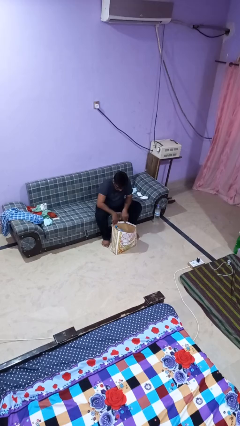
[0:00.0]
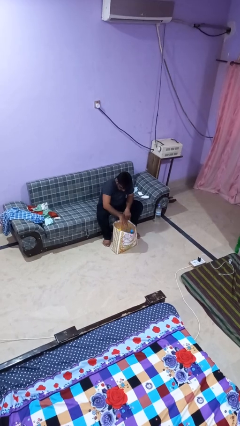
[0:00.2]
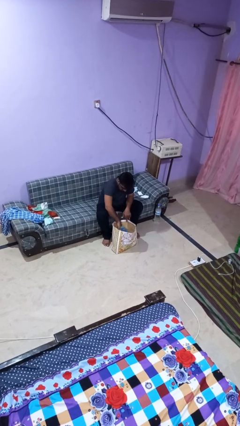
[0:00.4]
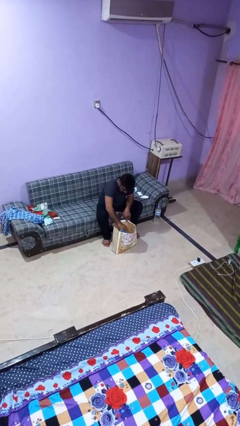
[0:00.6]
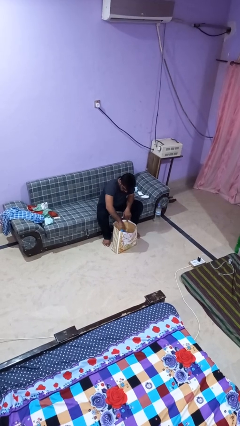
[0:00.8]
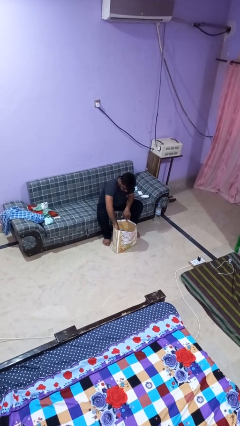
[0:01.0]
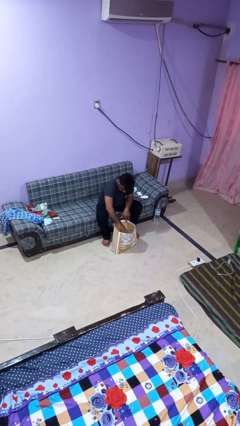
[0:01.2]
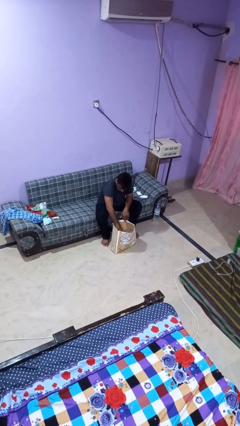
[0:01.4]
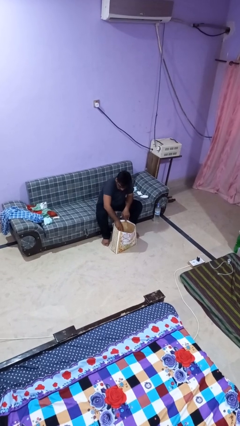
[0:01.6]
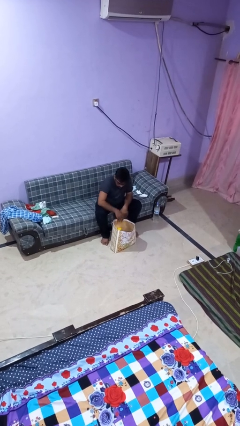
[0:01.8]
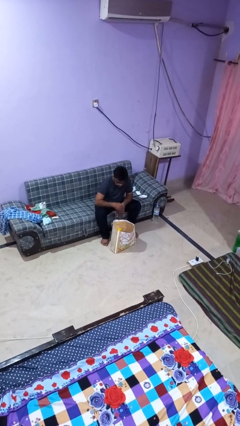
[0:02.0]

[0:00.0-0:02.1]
person searches in bag

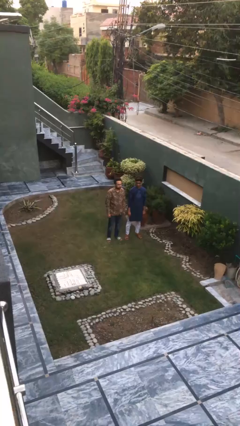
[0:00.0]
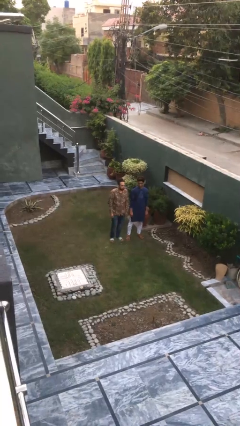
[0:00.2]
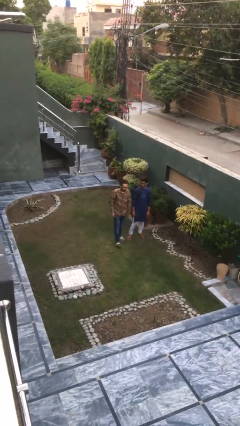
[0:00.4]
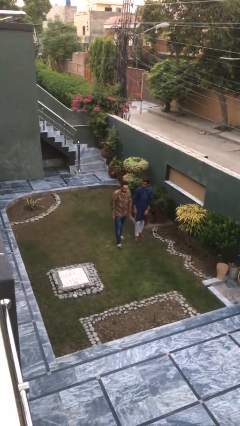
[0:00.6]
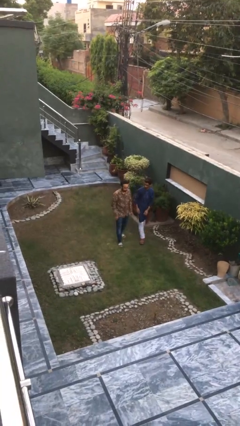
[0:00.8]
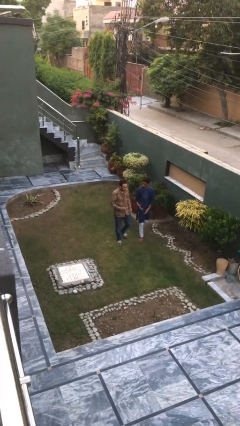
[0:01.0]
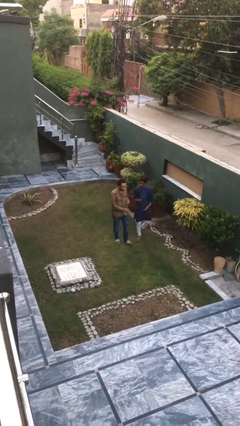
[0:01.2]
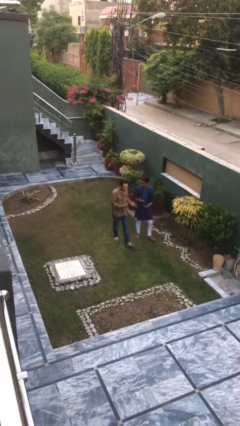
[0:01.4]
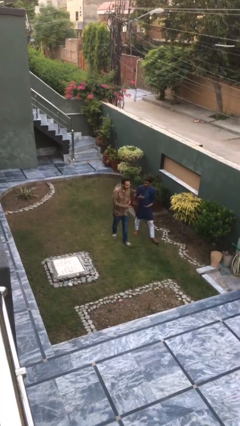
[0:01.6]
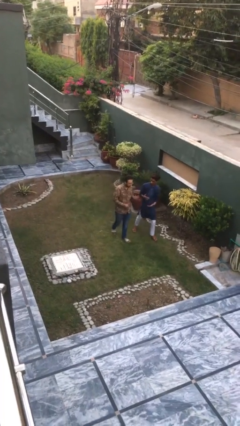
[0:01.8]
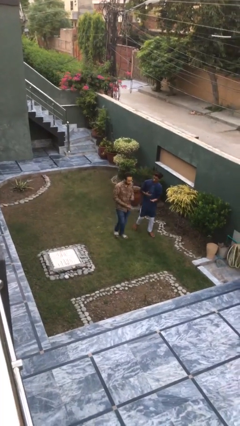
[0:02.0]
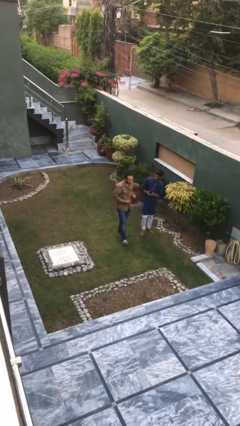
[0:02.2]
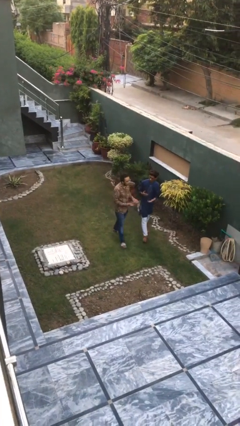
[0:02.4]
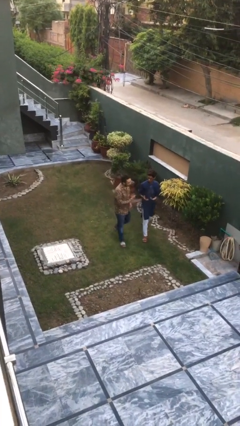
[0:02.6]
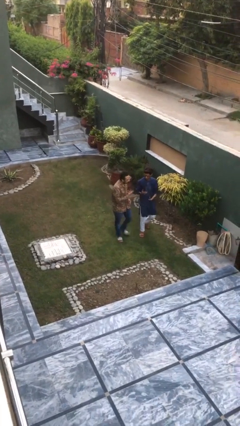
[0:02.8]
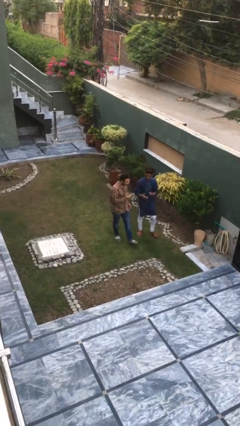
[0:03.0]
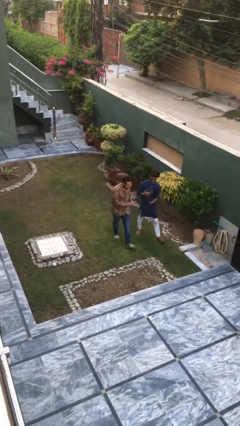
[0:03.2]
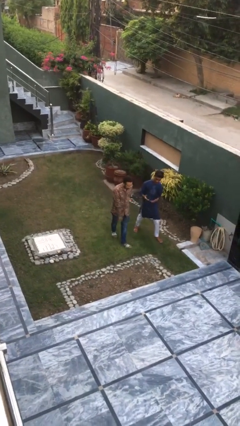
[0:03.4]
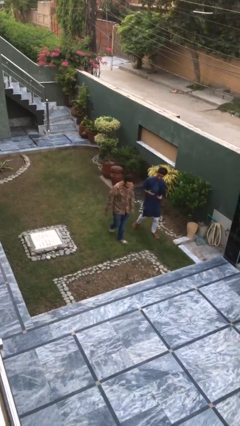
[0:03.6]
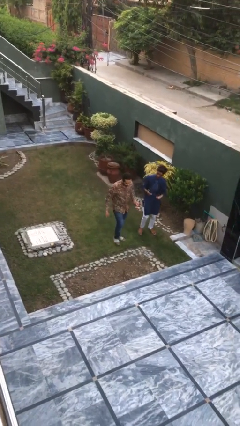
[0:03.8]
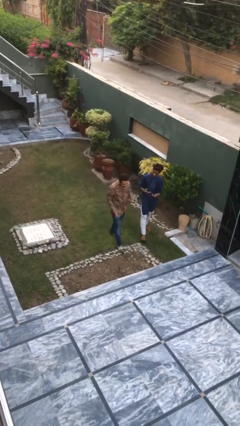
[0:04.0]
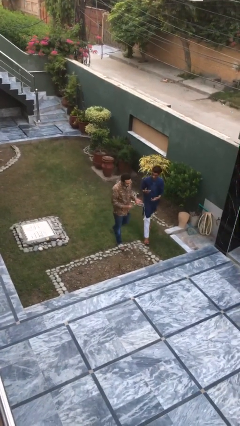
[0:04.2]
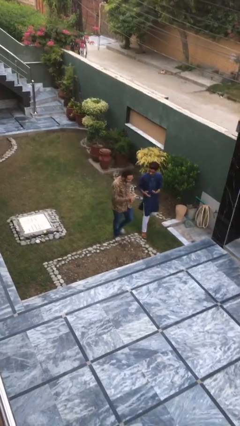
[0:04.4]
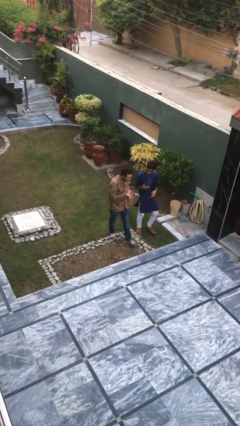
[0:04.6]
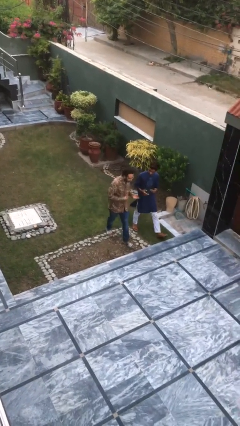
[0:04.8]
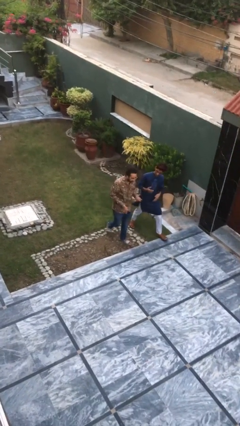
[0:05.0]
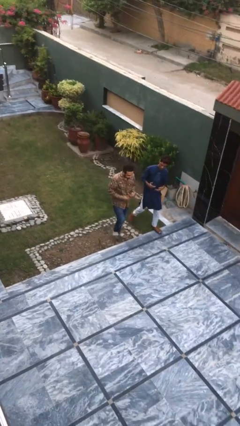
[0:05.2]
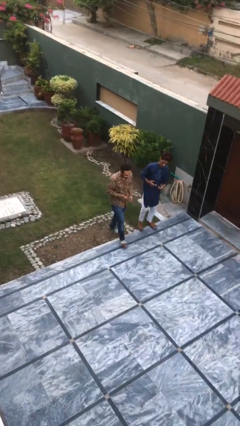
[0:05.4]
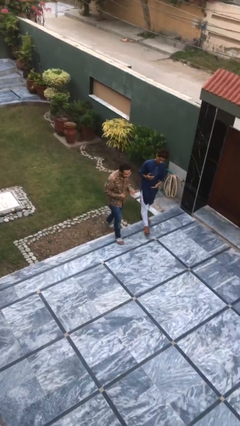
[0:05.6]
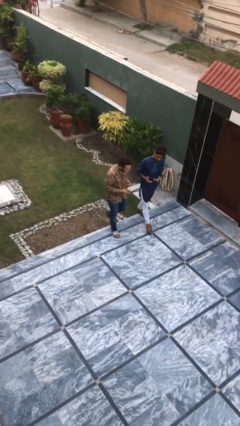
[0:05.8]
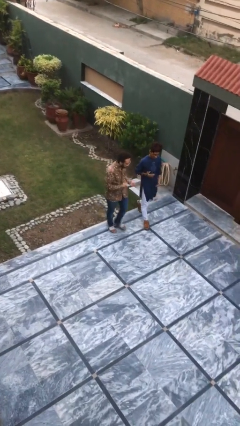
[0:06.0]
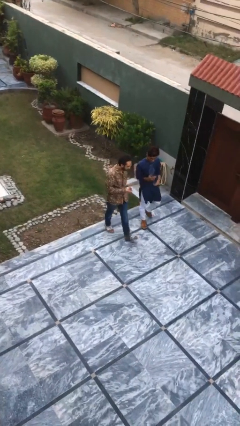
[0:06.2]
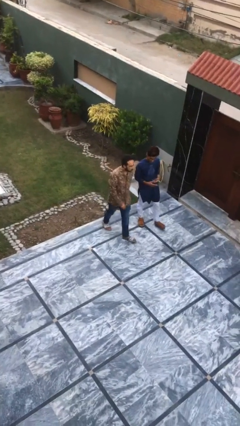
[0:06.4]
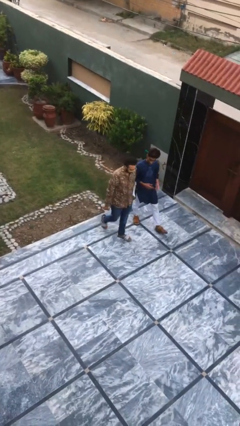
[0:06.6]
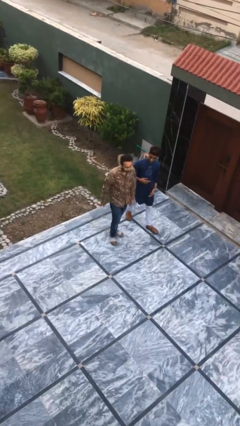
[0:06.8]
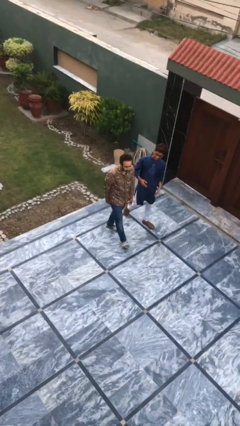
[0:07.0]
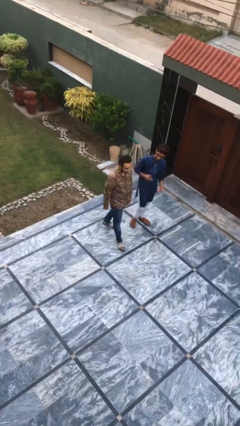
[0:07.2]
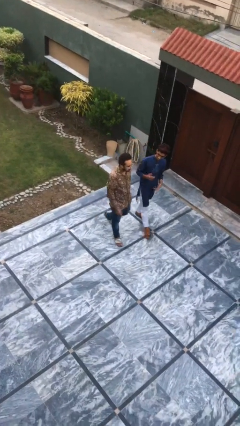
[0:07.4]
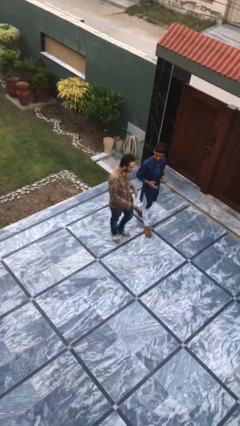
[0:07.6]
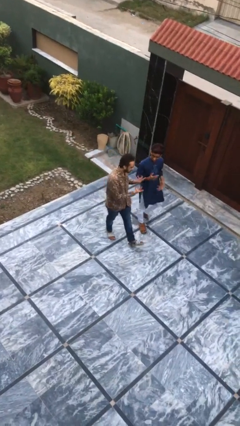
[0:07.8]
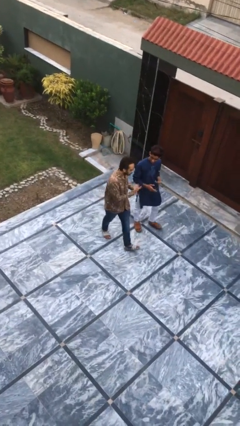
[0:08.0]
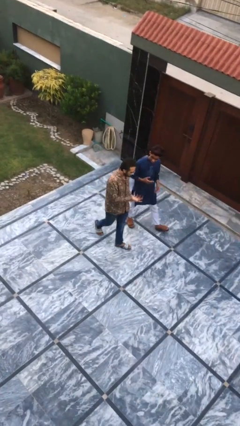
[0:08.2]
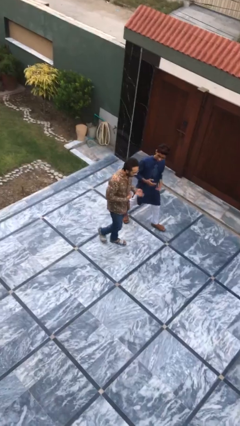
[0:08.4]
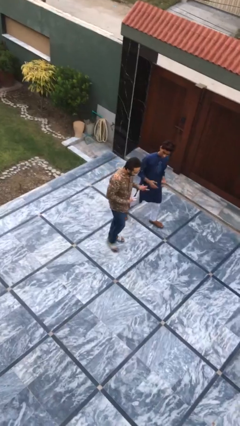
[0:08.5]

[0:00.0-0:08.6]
person talks to person

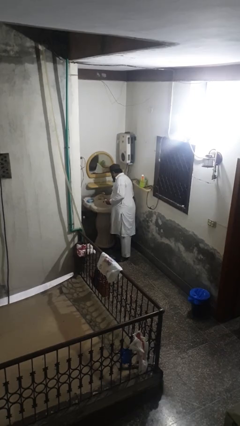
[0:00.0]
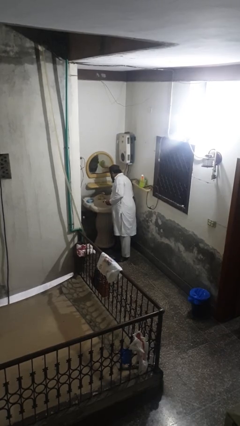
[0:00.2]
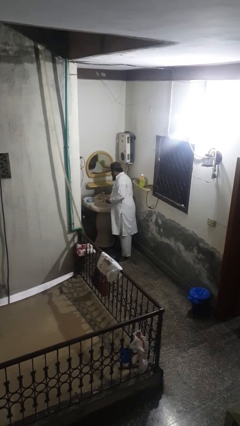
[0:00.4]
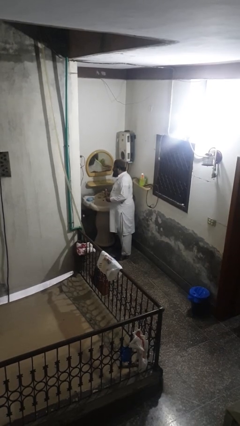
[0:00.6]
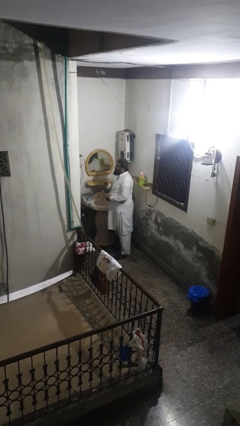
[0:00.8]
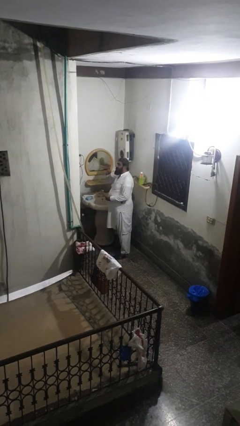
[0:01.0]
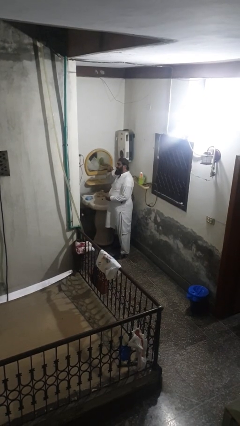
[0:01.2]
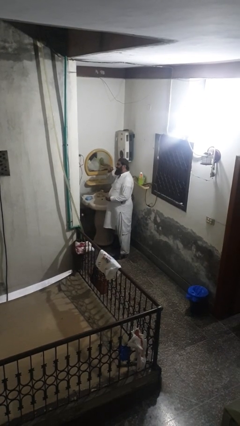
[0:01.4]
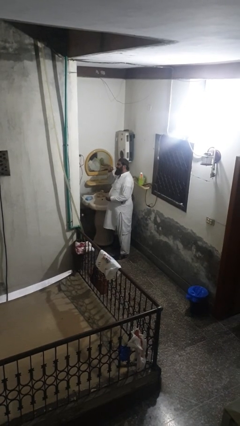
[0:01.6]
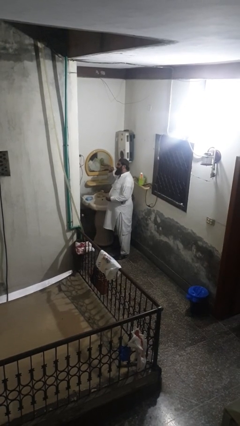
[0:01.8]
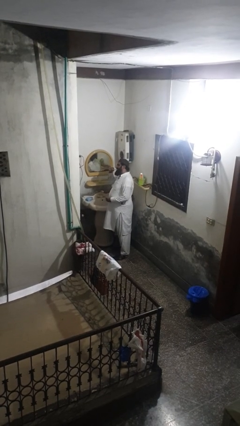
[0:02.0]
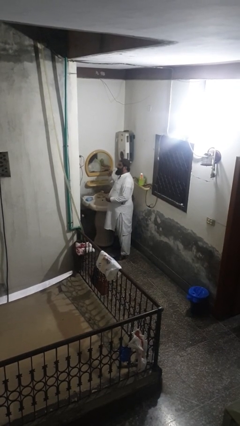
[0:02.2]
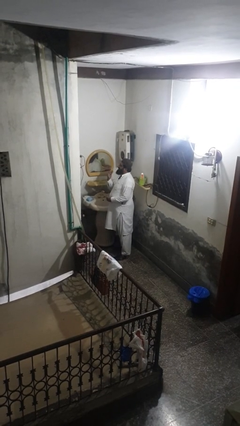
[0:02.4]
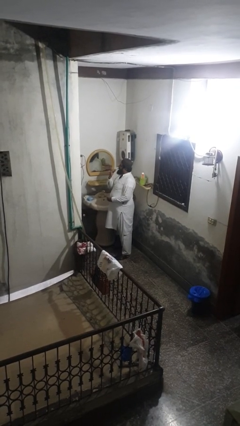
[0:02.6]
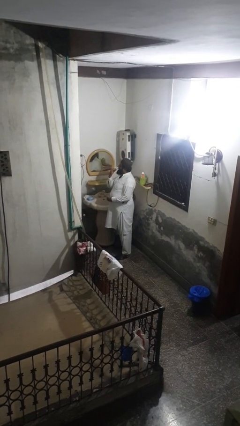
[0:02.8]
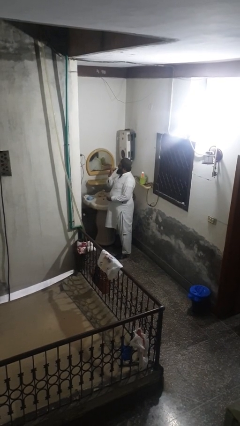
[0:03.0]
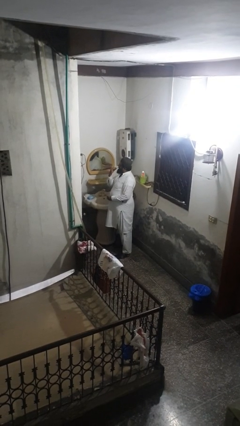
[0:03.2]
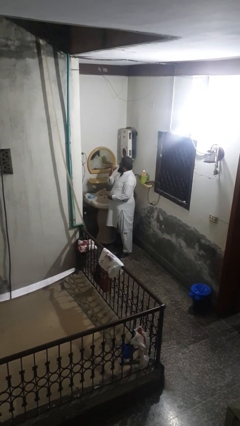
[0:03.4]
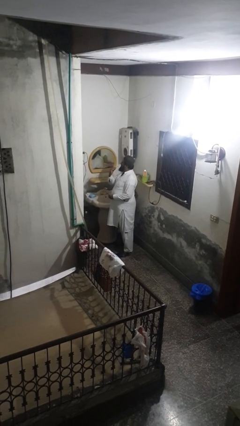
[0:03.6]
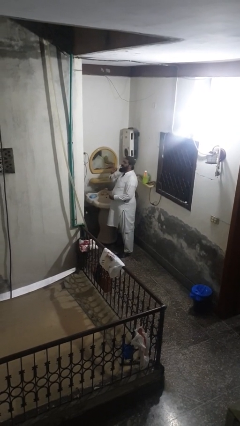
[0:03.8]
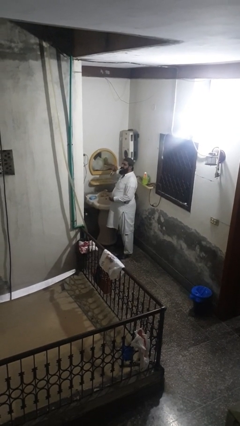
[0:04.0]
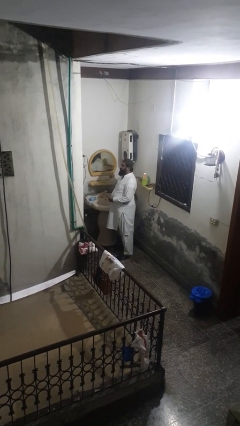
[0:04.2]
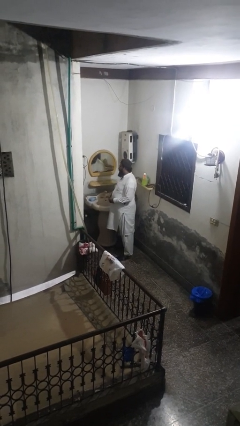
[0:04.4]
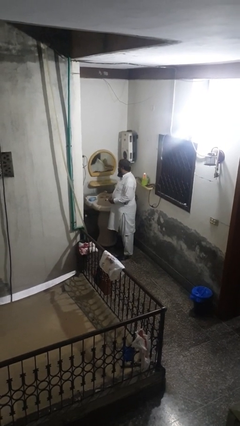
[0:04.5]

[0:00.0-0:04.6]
person brushes teeth

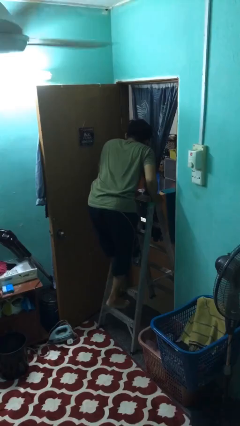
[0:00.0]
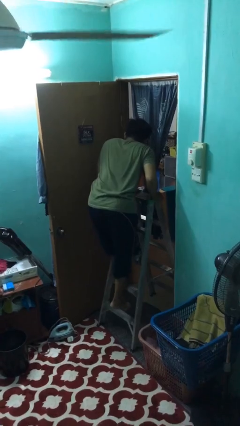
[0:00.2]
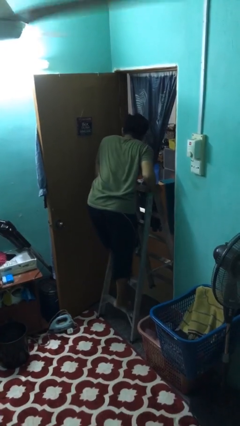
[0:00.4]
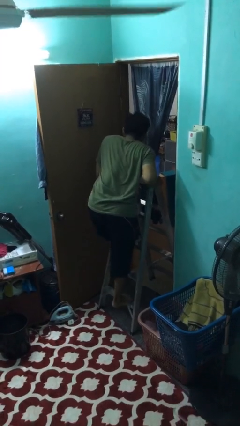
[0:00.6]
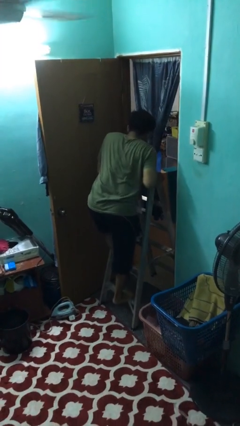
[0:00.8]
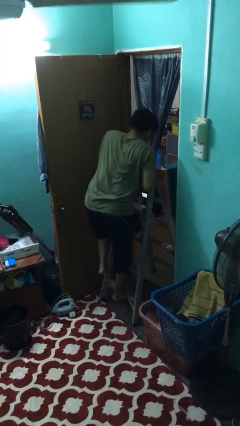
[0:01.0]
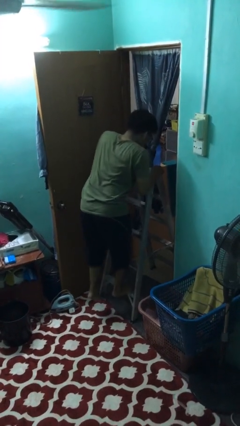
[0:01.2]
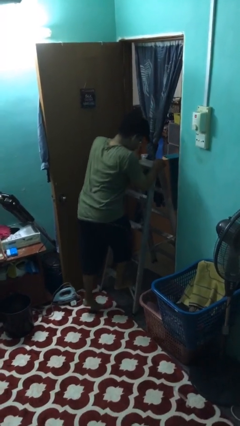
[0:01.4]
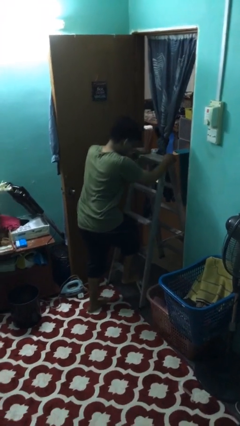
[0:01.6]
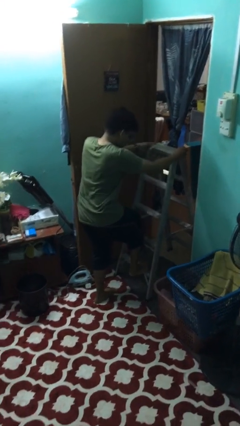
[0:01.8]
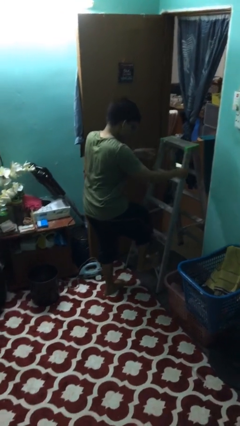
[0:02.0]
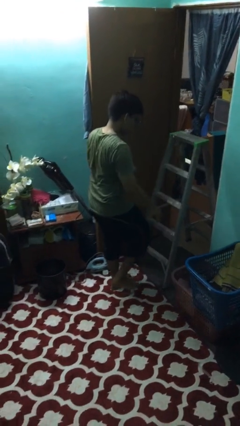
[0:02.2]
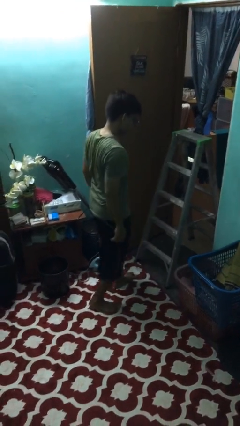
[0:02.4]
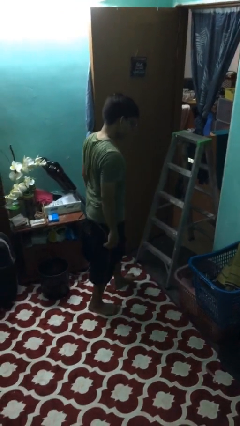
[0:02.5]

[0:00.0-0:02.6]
person climbs down ladder
